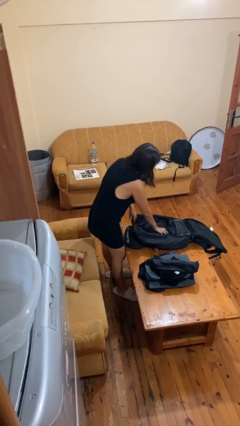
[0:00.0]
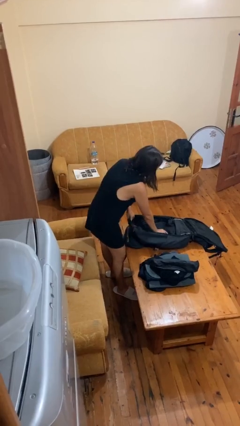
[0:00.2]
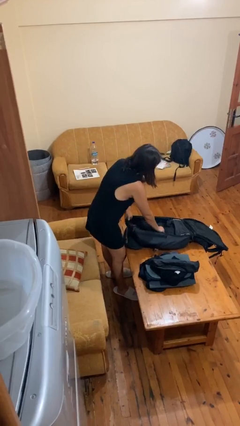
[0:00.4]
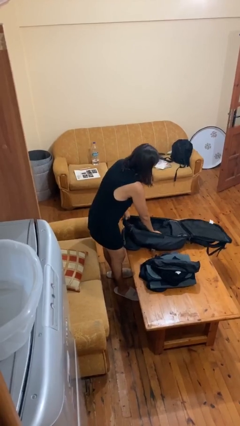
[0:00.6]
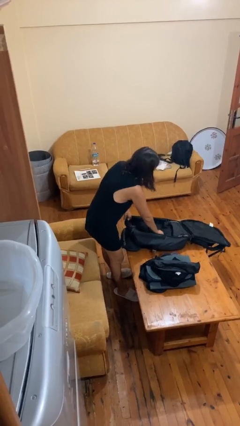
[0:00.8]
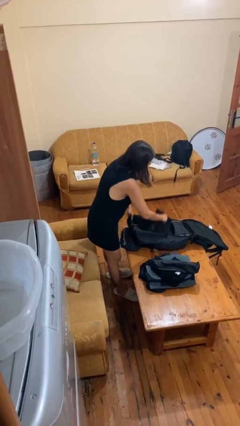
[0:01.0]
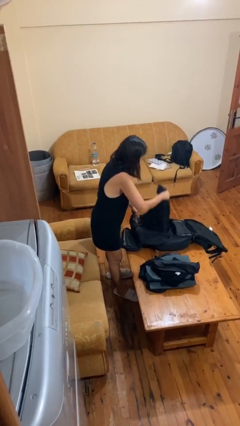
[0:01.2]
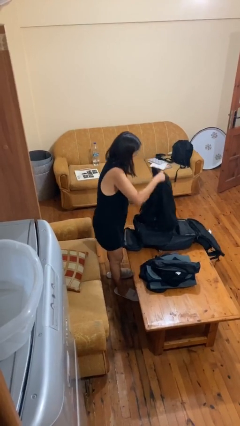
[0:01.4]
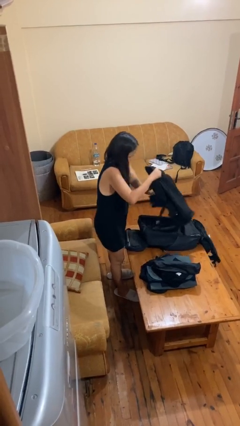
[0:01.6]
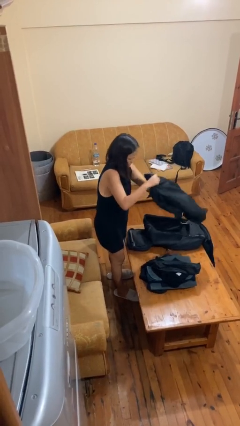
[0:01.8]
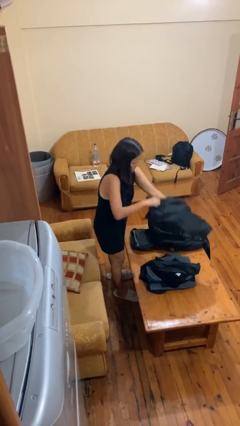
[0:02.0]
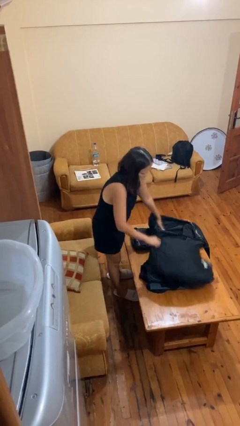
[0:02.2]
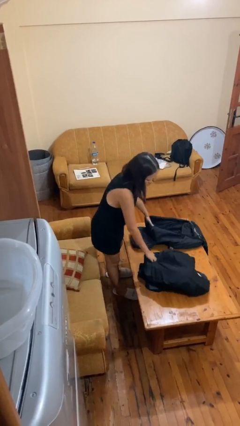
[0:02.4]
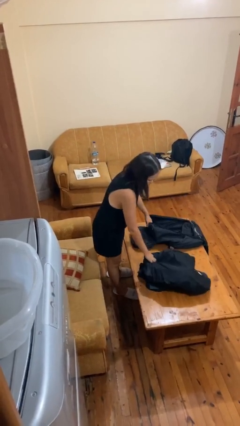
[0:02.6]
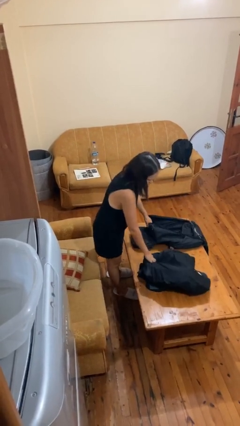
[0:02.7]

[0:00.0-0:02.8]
person unloads clothes from suitcase

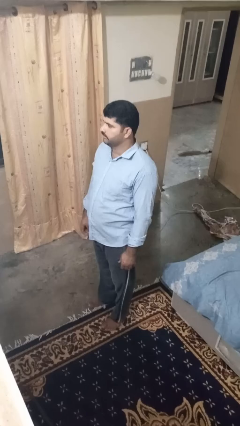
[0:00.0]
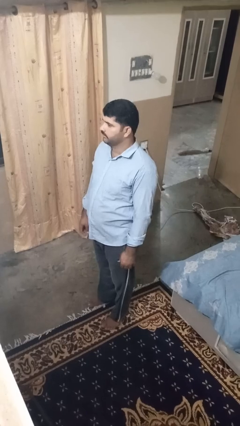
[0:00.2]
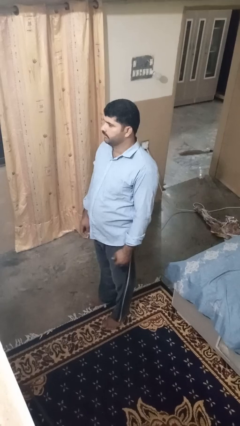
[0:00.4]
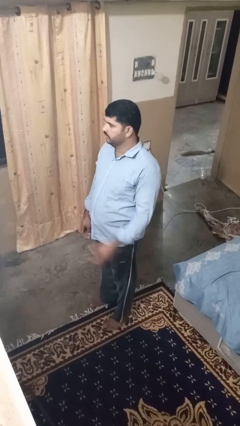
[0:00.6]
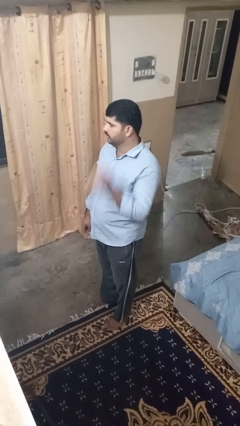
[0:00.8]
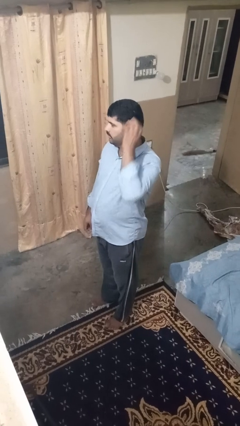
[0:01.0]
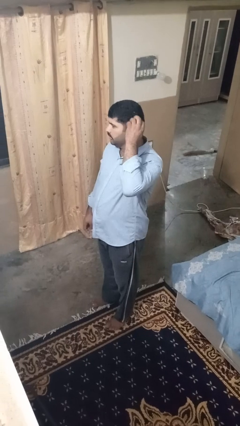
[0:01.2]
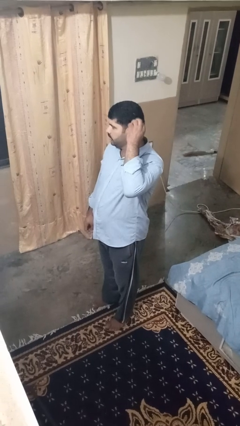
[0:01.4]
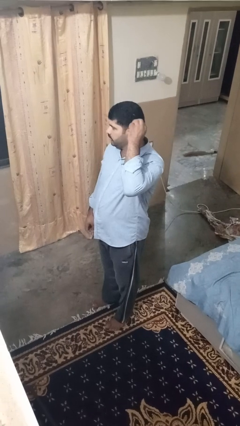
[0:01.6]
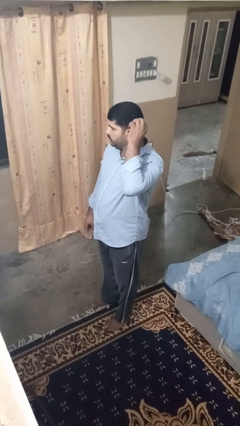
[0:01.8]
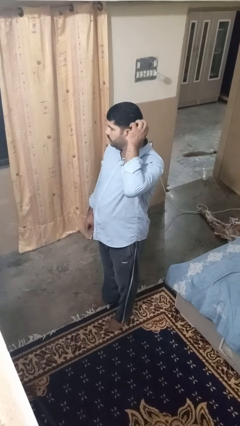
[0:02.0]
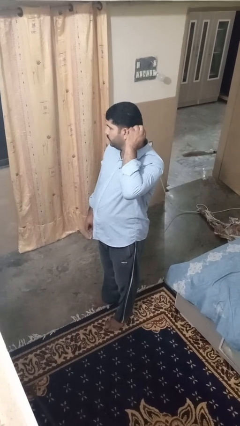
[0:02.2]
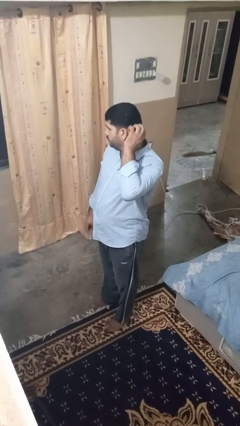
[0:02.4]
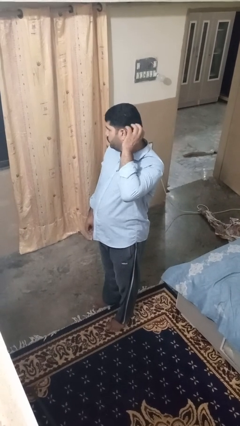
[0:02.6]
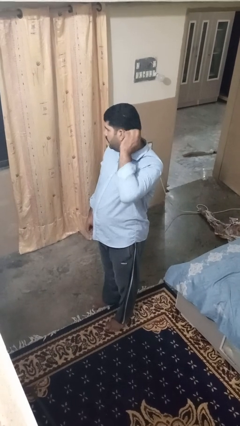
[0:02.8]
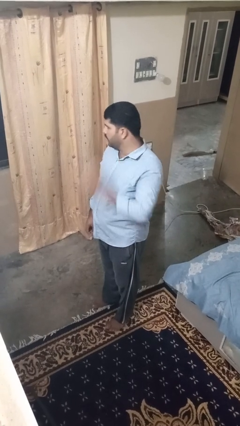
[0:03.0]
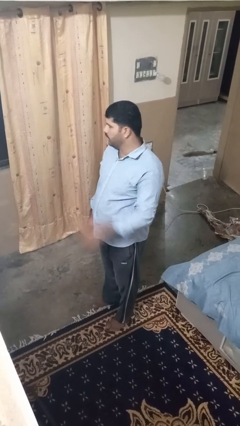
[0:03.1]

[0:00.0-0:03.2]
person strokes hair

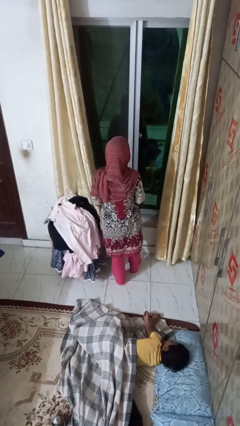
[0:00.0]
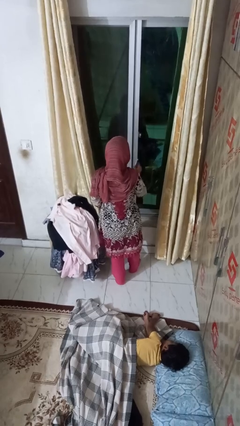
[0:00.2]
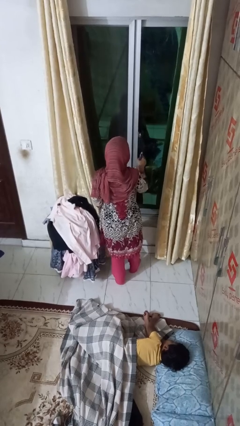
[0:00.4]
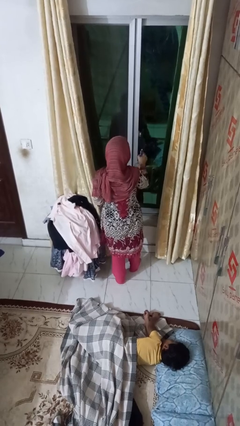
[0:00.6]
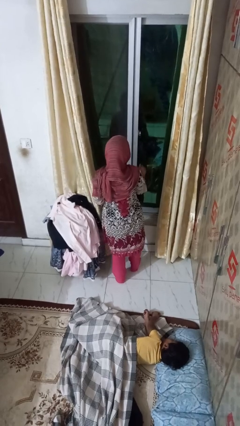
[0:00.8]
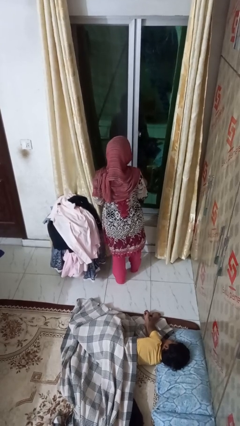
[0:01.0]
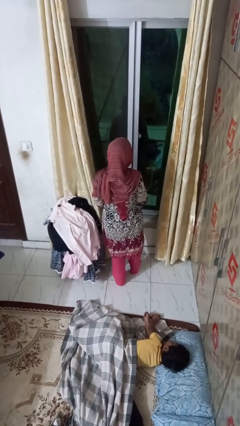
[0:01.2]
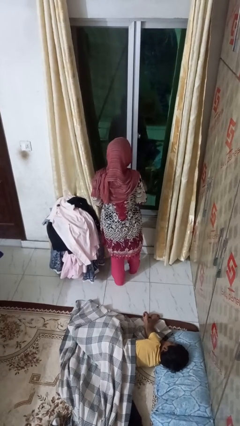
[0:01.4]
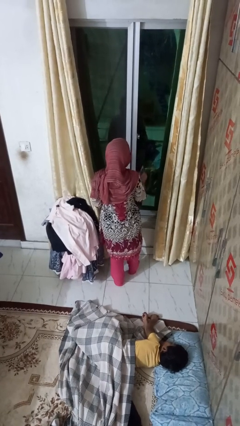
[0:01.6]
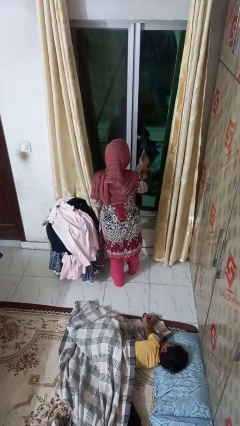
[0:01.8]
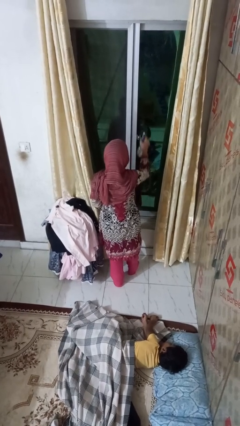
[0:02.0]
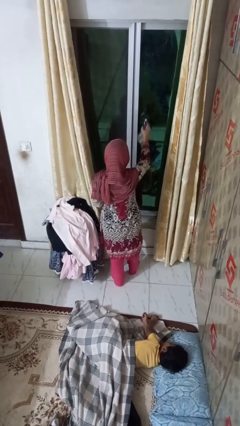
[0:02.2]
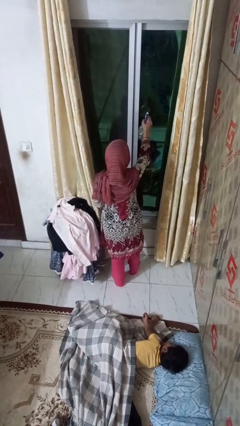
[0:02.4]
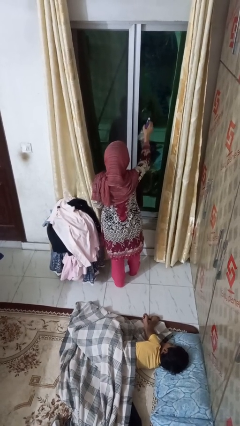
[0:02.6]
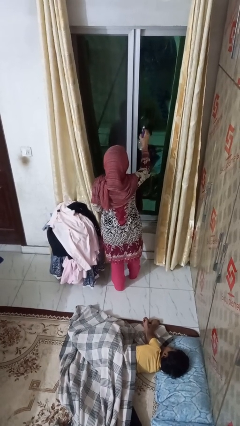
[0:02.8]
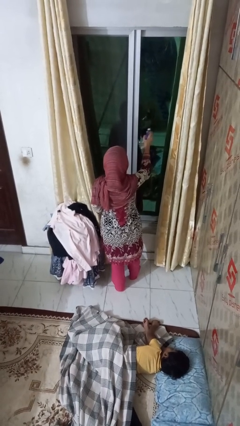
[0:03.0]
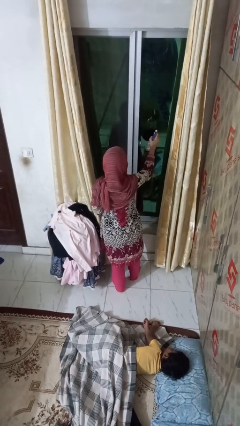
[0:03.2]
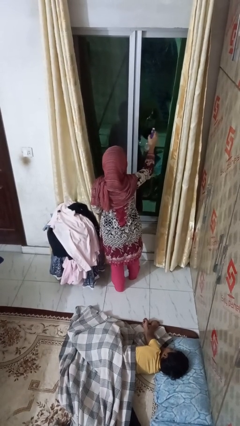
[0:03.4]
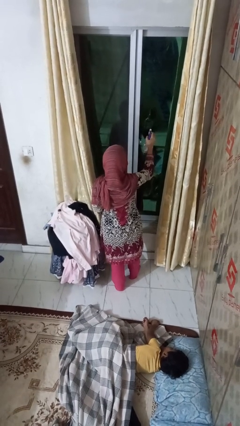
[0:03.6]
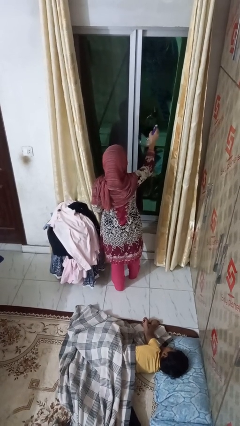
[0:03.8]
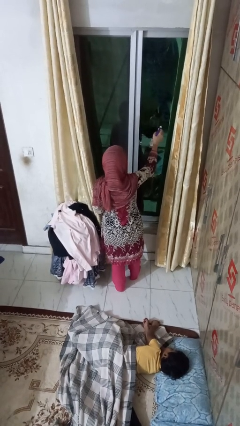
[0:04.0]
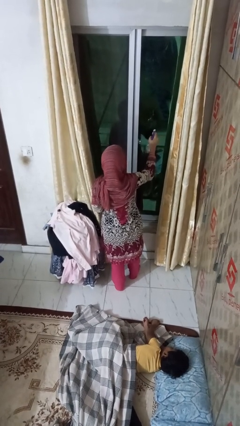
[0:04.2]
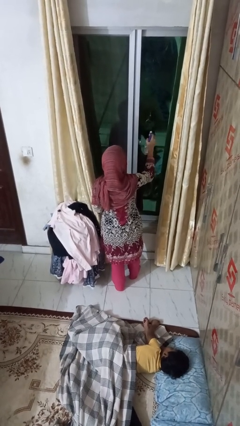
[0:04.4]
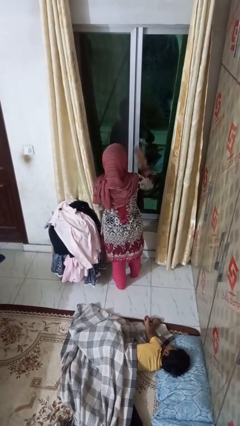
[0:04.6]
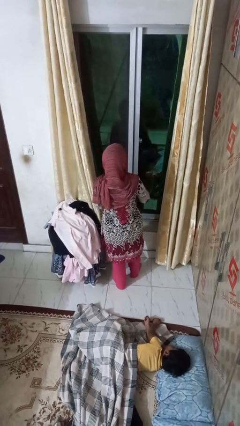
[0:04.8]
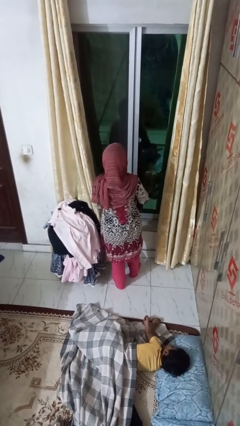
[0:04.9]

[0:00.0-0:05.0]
person sprays from bottle

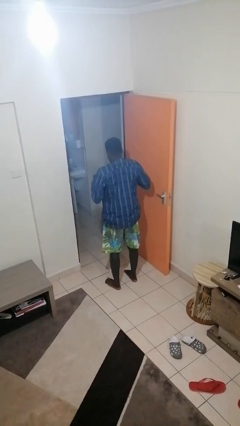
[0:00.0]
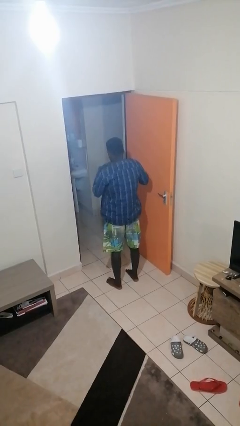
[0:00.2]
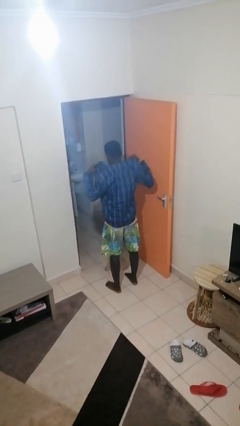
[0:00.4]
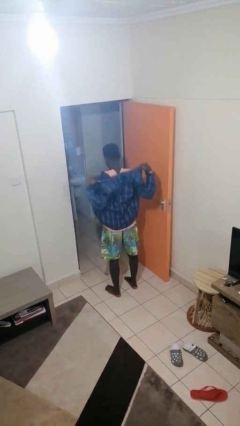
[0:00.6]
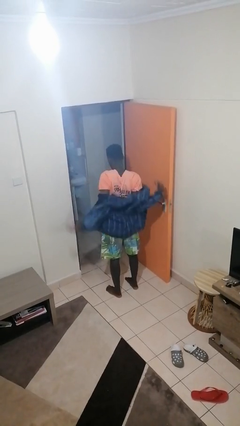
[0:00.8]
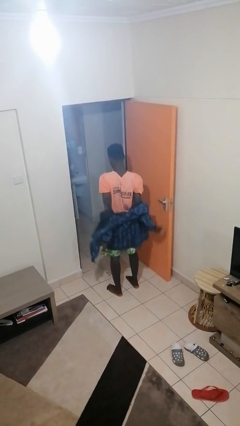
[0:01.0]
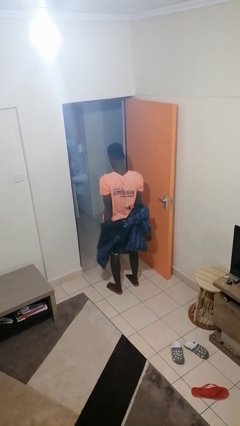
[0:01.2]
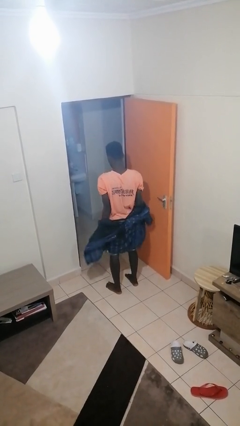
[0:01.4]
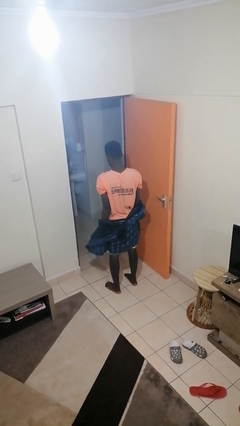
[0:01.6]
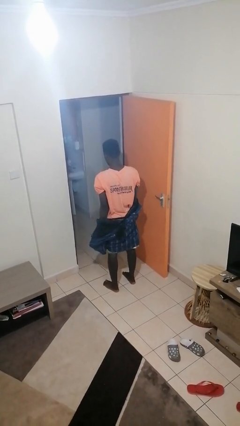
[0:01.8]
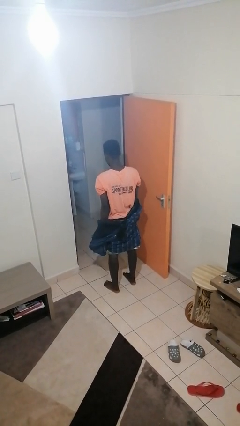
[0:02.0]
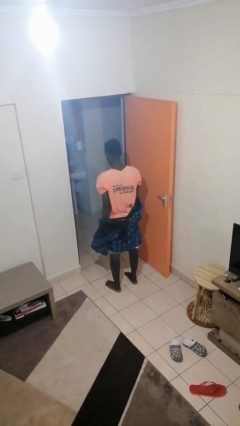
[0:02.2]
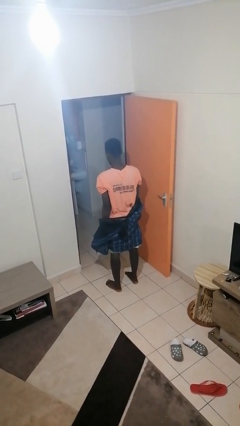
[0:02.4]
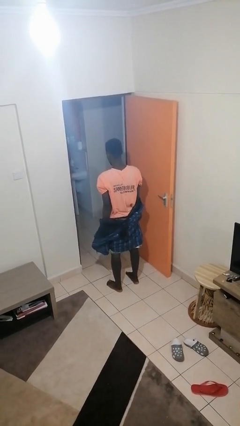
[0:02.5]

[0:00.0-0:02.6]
person takes off jacket

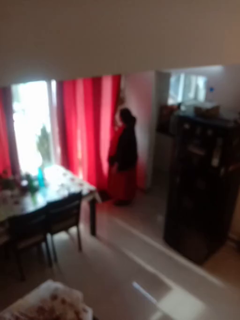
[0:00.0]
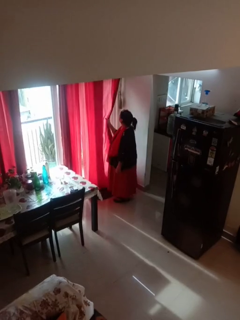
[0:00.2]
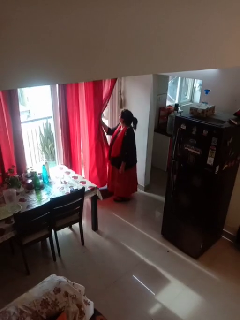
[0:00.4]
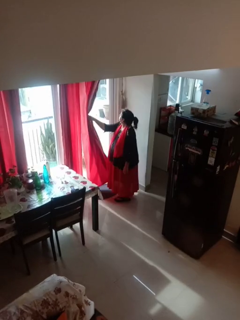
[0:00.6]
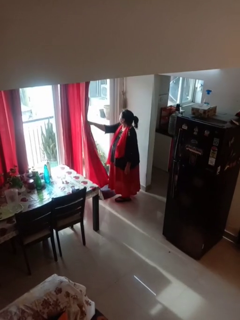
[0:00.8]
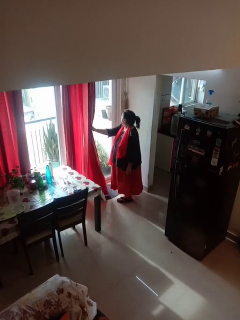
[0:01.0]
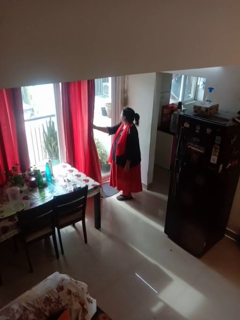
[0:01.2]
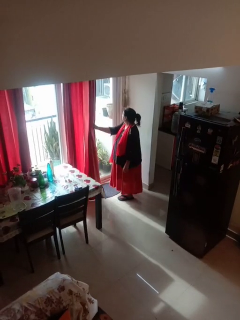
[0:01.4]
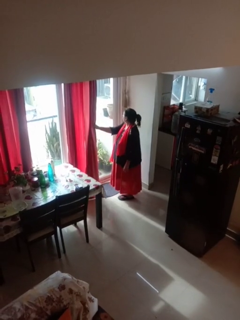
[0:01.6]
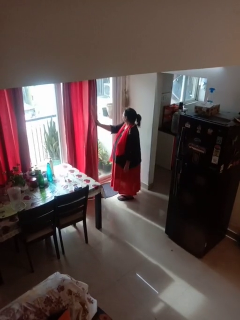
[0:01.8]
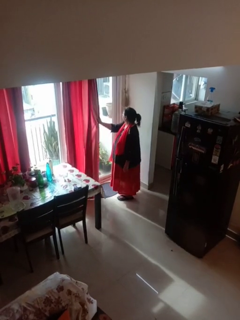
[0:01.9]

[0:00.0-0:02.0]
person opens curtains

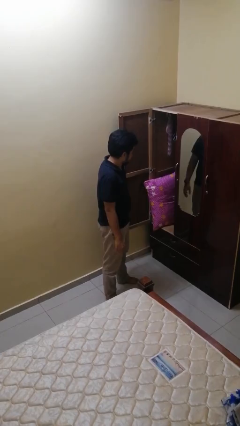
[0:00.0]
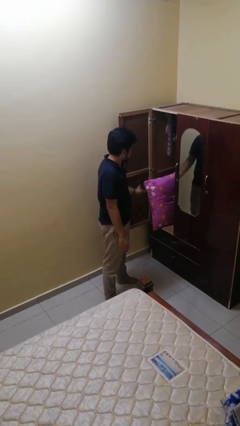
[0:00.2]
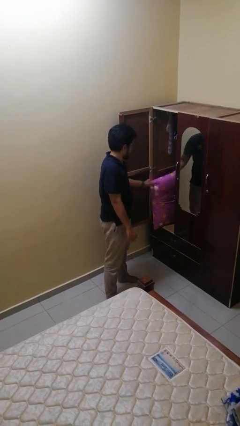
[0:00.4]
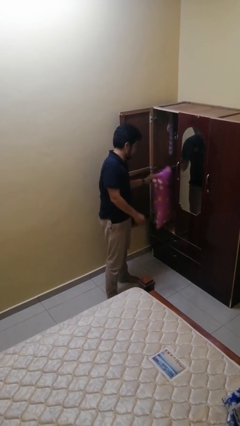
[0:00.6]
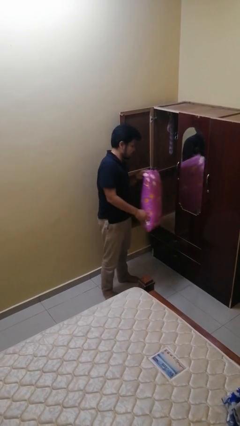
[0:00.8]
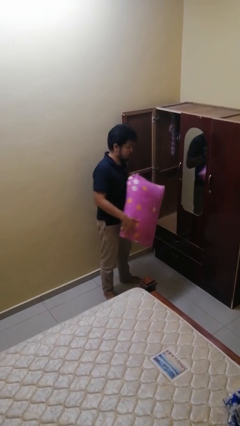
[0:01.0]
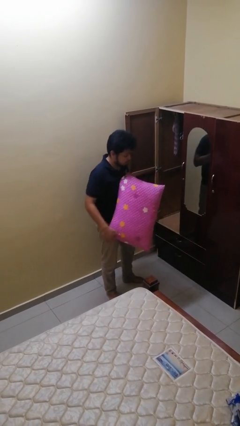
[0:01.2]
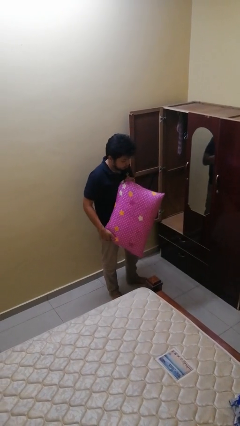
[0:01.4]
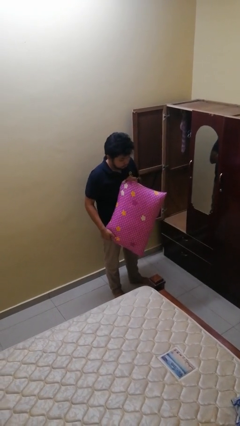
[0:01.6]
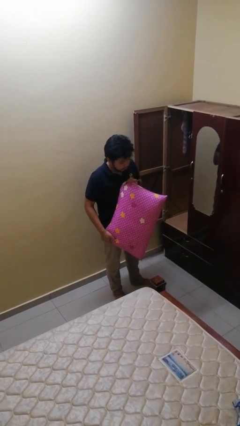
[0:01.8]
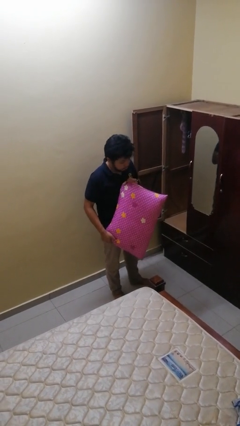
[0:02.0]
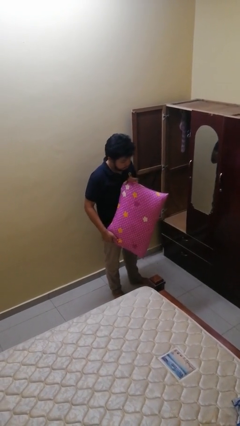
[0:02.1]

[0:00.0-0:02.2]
person picks up object from cabinet

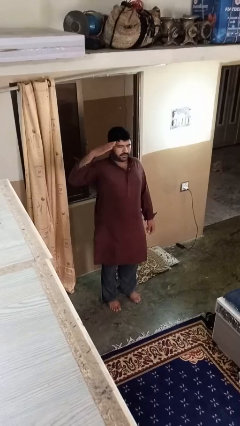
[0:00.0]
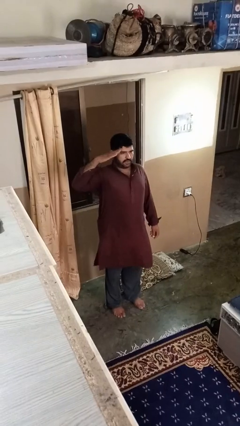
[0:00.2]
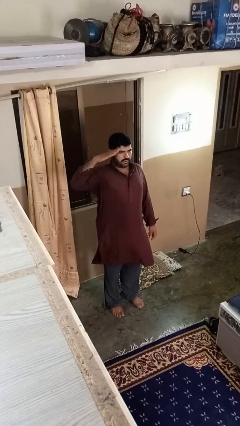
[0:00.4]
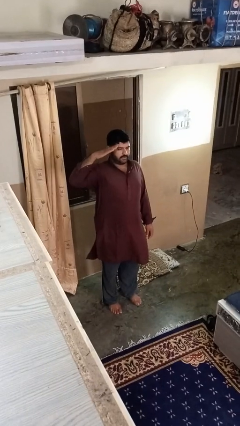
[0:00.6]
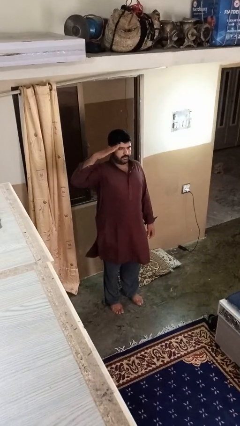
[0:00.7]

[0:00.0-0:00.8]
person salutes
